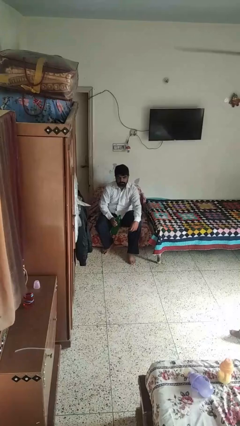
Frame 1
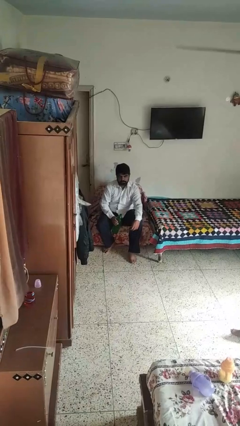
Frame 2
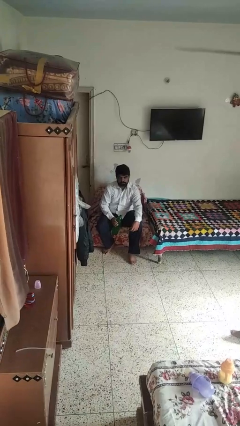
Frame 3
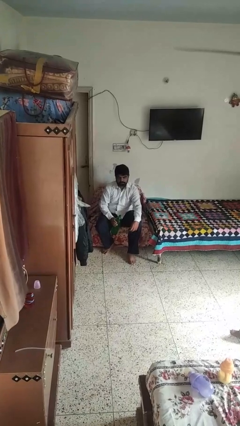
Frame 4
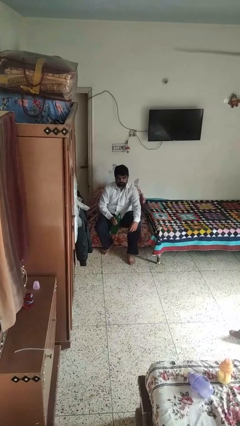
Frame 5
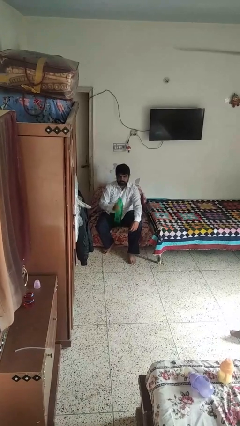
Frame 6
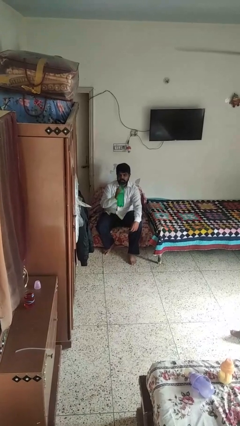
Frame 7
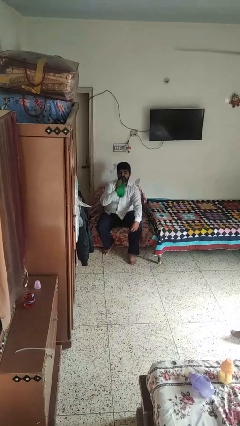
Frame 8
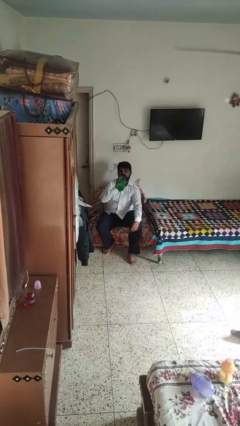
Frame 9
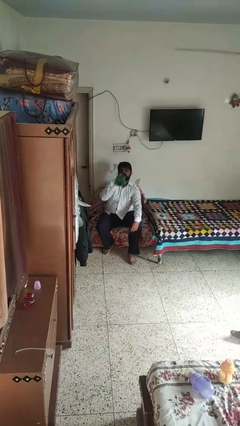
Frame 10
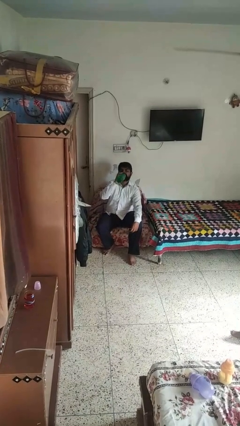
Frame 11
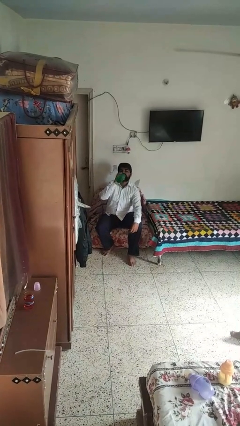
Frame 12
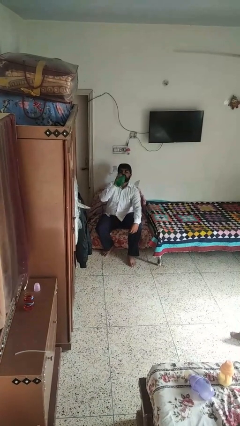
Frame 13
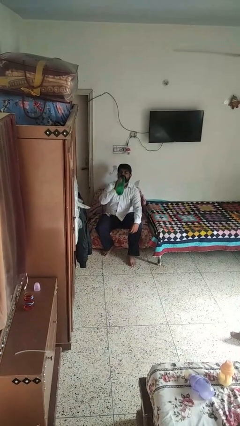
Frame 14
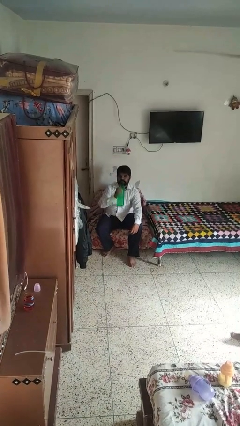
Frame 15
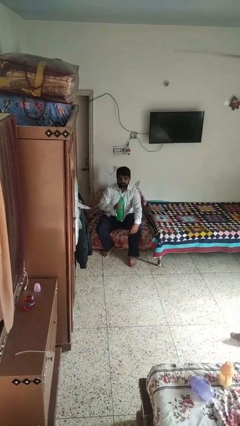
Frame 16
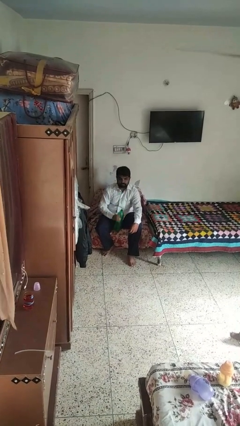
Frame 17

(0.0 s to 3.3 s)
person drinks from bottle

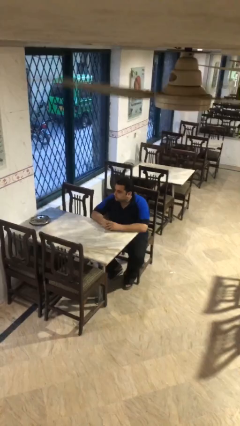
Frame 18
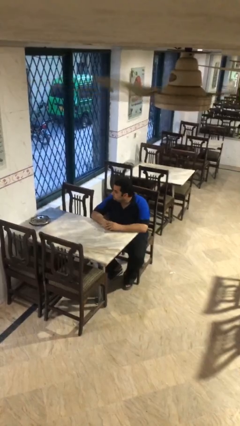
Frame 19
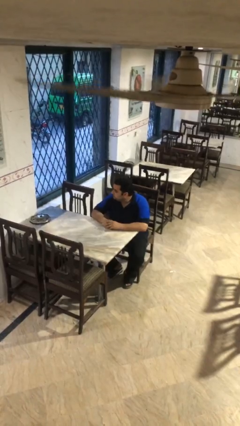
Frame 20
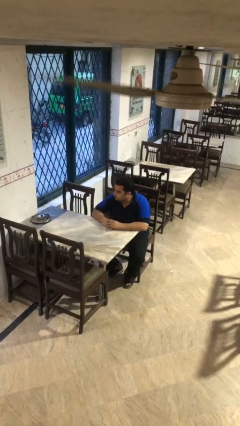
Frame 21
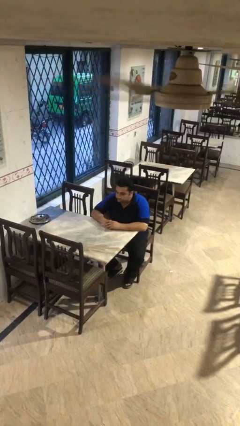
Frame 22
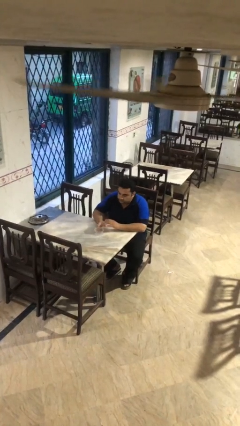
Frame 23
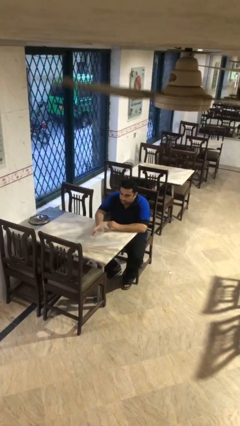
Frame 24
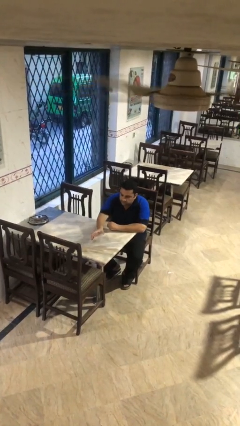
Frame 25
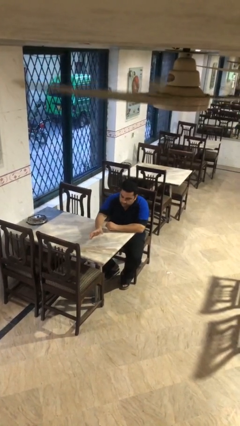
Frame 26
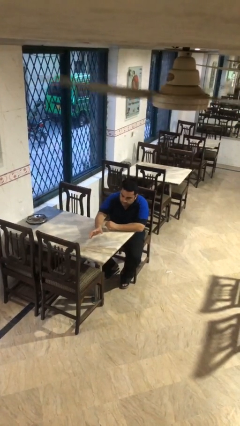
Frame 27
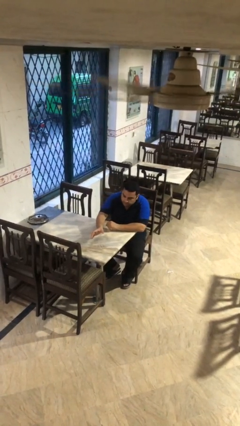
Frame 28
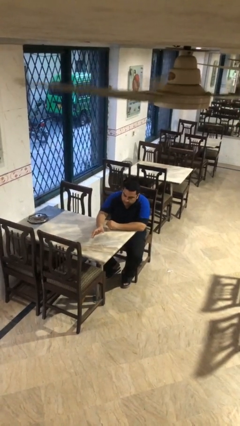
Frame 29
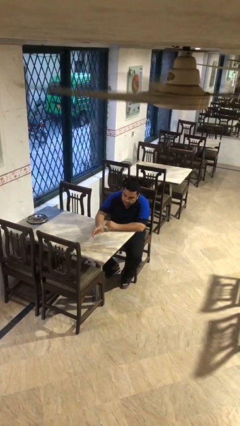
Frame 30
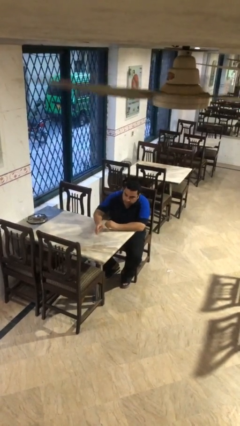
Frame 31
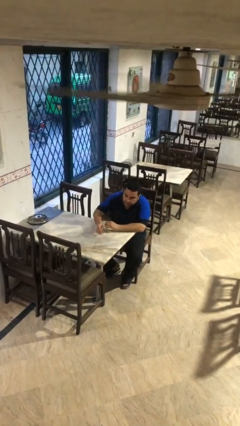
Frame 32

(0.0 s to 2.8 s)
person knocks over glass

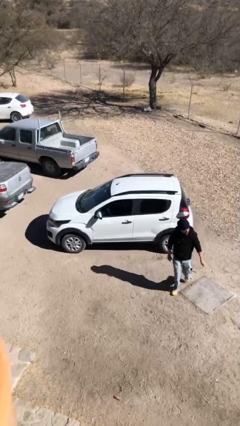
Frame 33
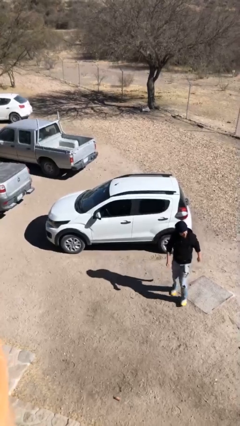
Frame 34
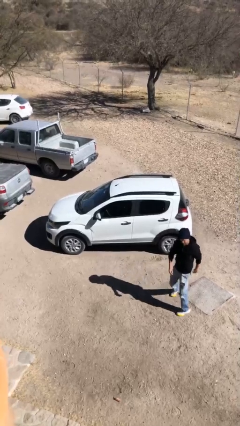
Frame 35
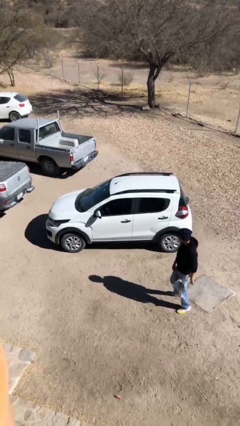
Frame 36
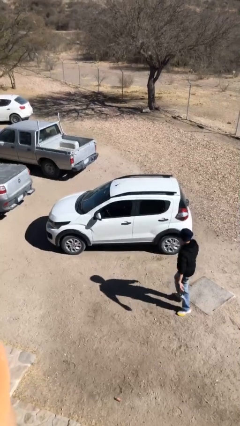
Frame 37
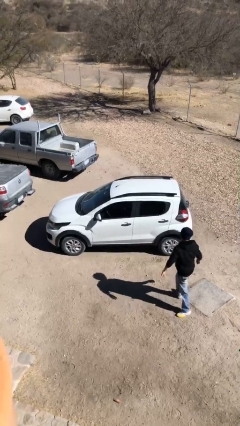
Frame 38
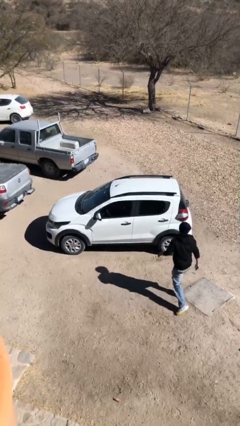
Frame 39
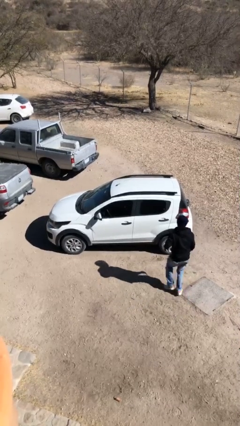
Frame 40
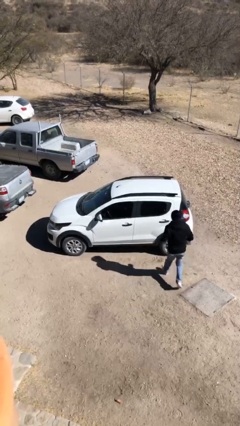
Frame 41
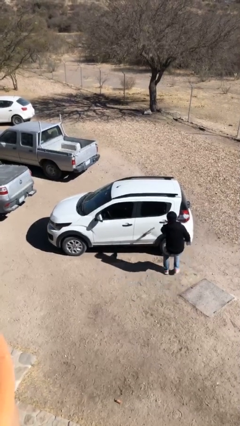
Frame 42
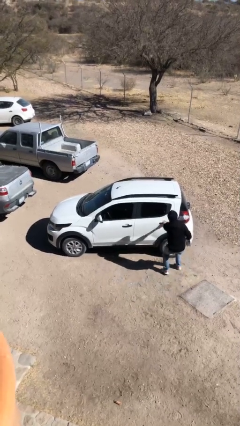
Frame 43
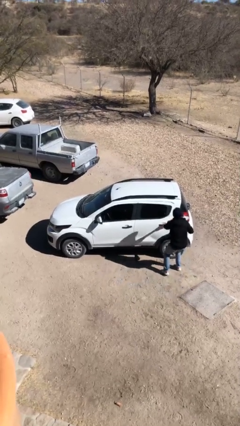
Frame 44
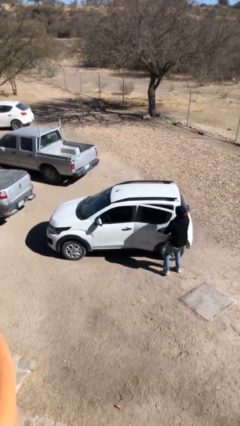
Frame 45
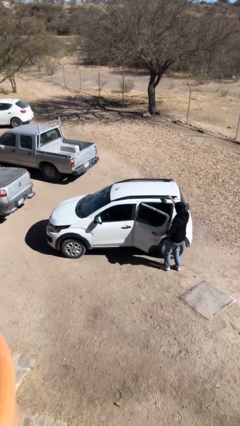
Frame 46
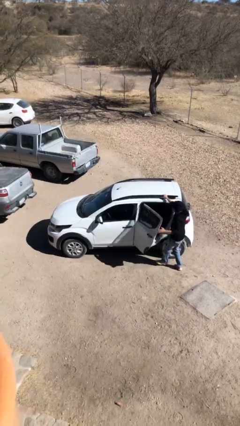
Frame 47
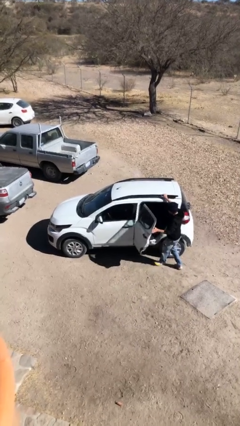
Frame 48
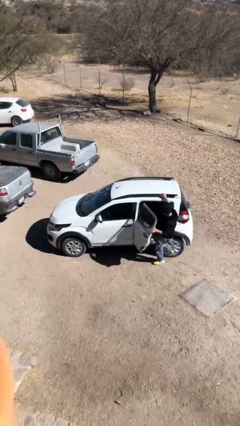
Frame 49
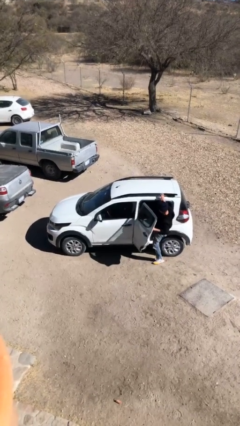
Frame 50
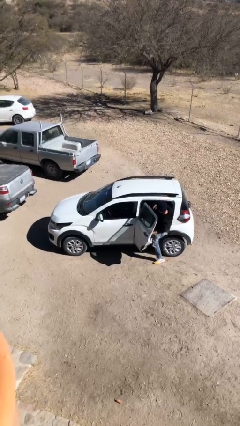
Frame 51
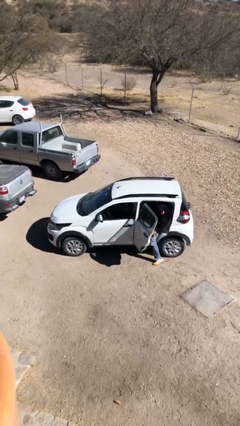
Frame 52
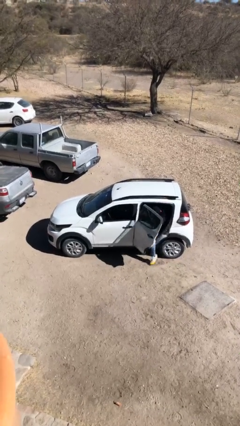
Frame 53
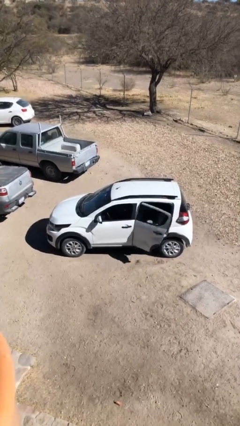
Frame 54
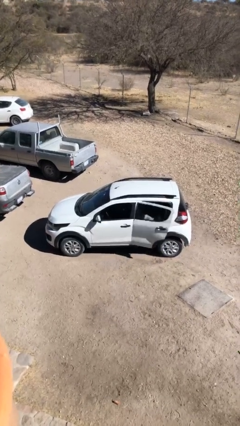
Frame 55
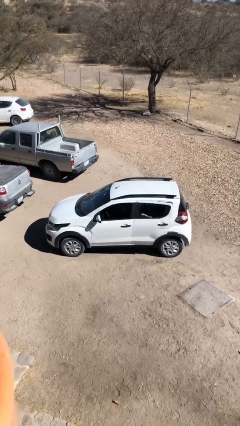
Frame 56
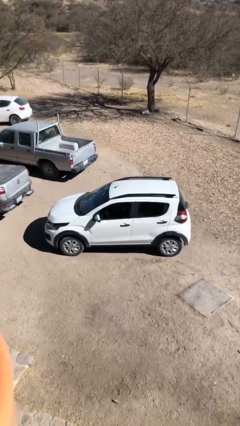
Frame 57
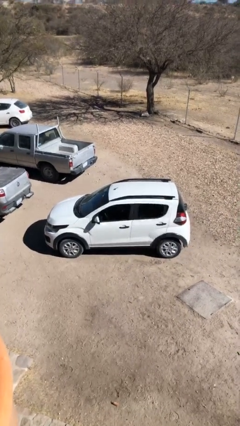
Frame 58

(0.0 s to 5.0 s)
car picks up person

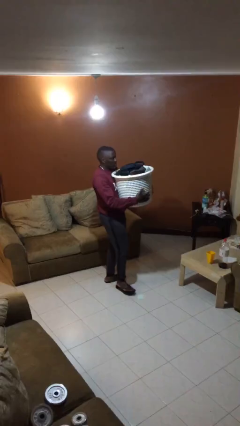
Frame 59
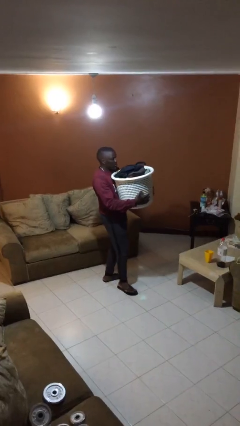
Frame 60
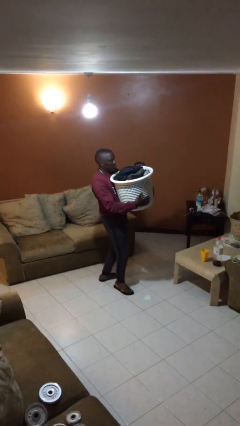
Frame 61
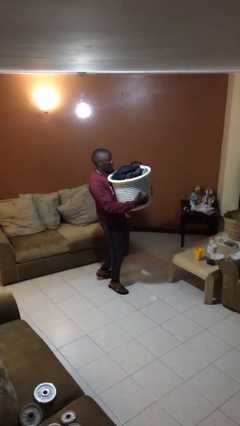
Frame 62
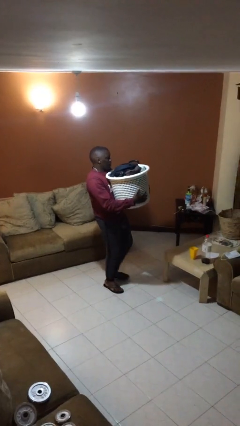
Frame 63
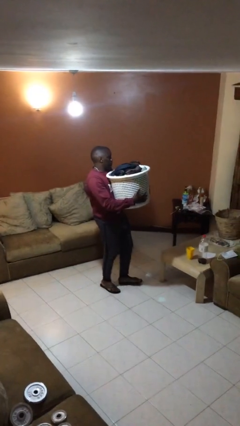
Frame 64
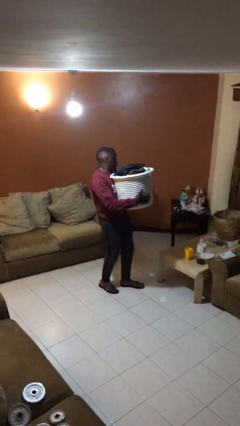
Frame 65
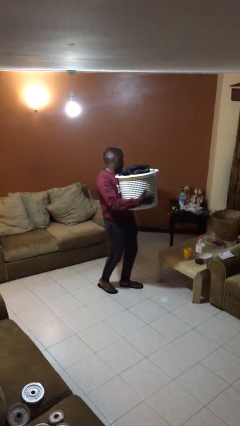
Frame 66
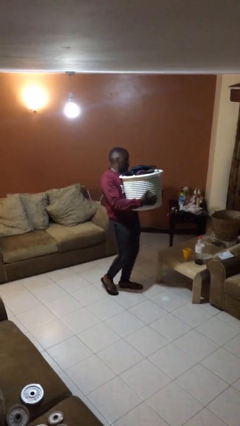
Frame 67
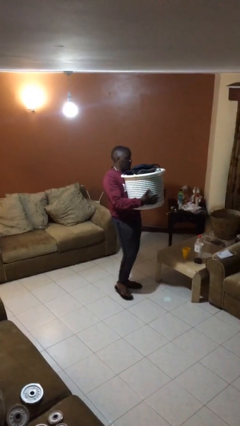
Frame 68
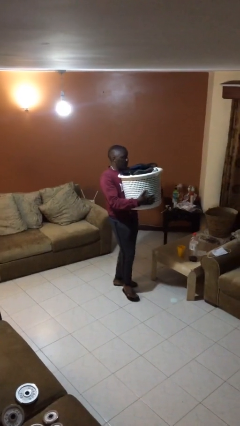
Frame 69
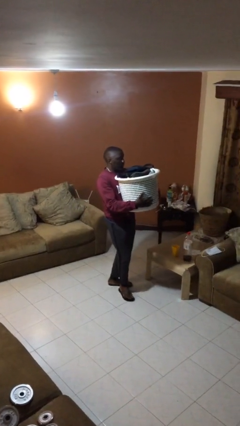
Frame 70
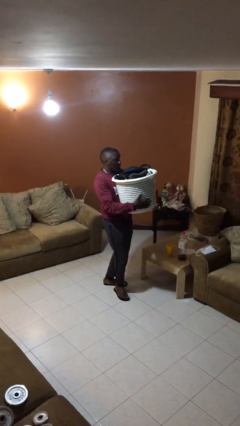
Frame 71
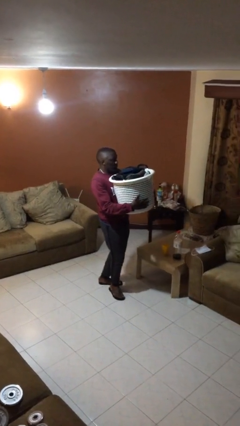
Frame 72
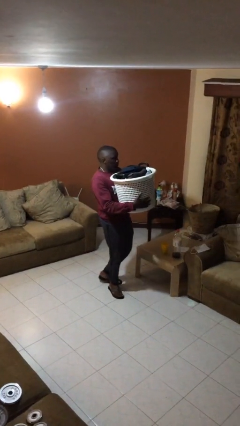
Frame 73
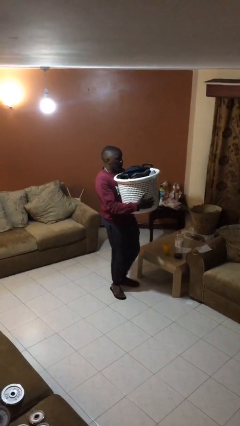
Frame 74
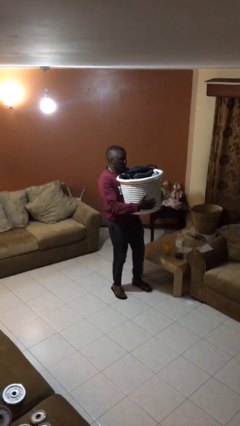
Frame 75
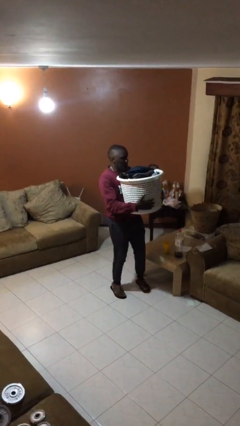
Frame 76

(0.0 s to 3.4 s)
person carries laundry basket

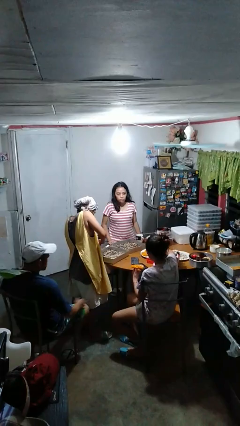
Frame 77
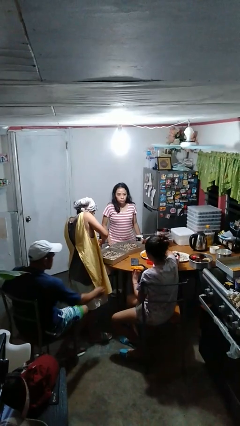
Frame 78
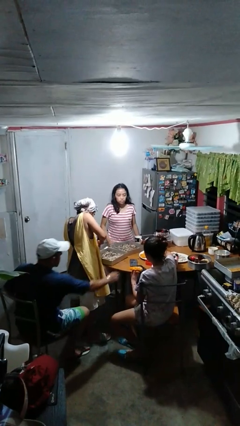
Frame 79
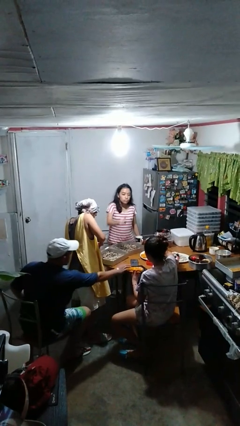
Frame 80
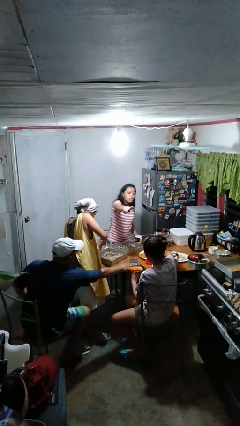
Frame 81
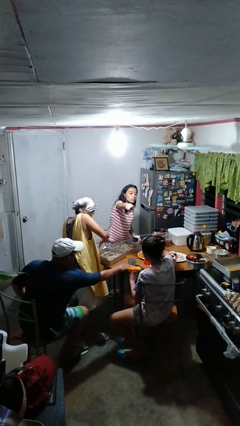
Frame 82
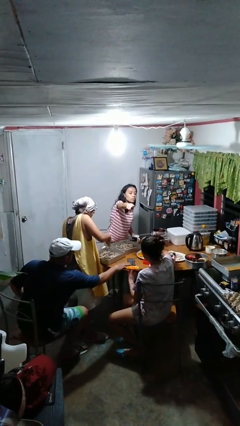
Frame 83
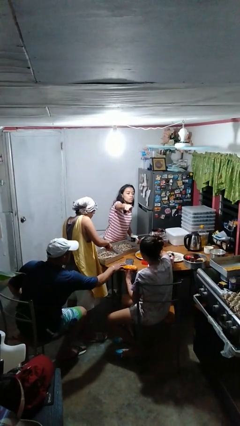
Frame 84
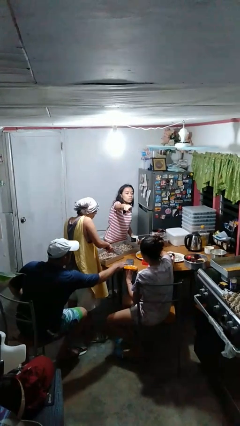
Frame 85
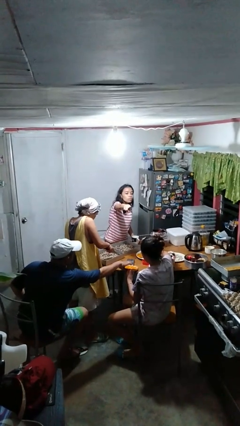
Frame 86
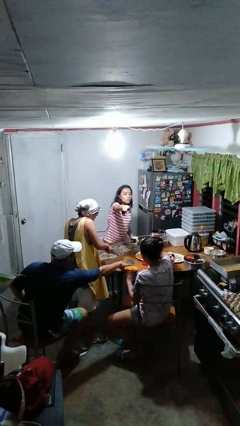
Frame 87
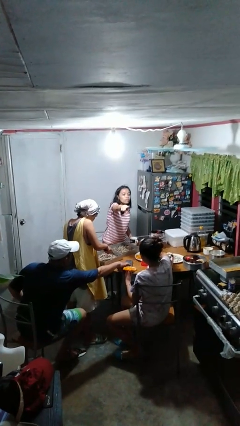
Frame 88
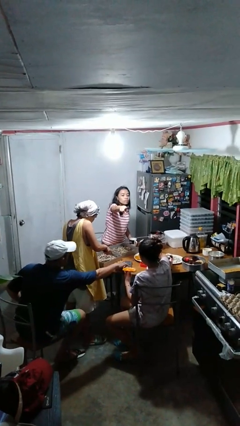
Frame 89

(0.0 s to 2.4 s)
person points at person

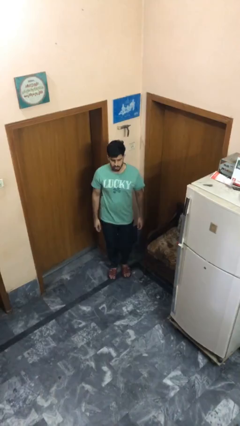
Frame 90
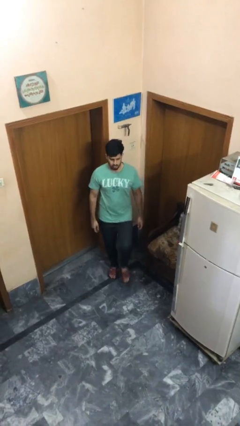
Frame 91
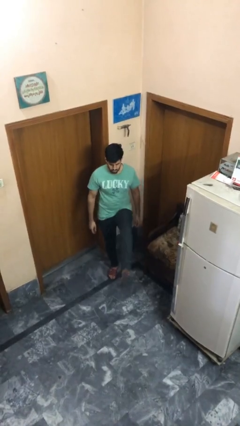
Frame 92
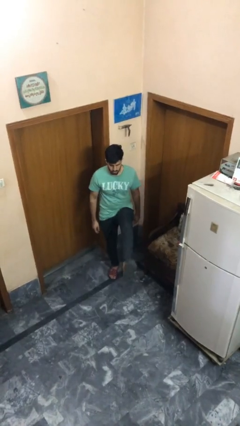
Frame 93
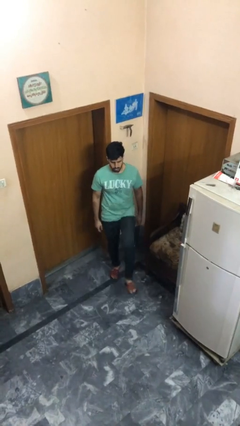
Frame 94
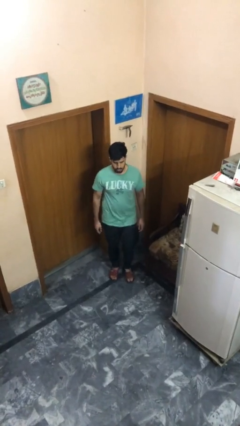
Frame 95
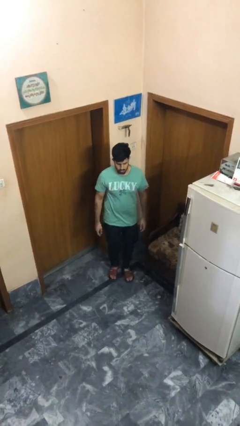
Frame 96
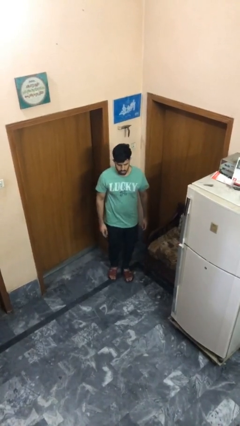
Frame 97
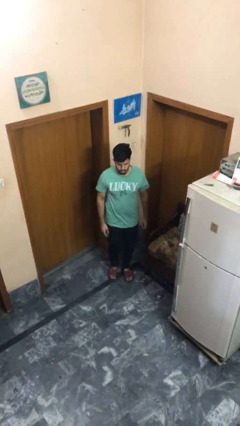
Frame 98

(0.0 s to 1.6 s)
person karate kicks
